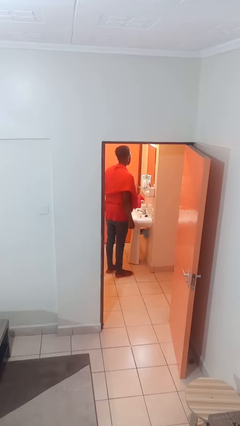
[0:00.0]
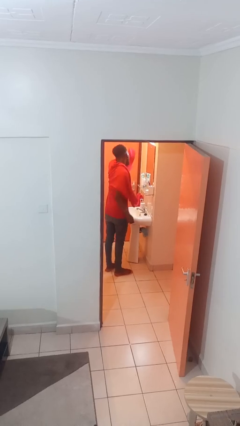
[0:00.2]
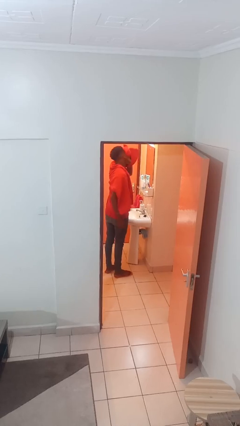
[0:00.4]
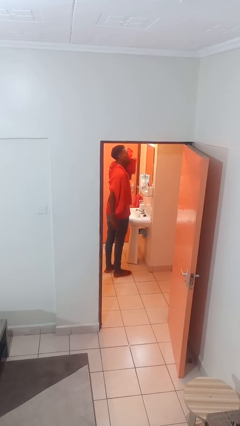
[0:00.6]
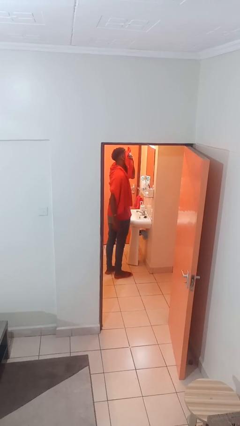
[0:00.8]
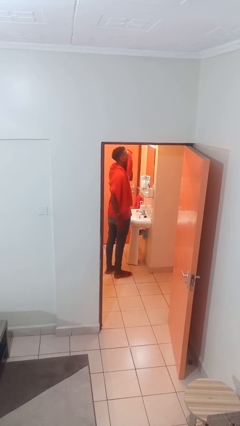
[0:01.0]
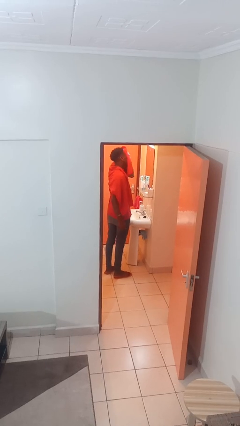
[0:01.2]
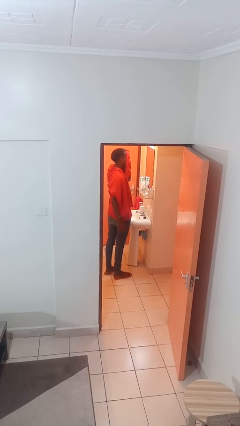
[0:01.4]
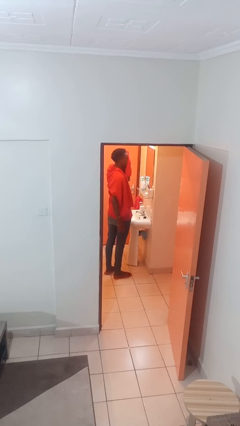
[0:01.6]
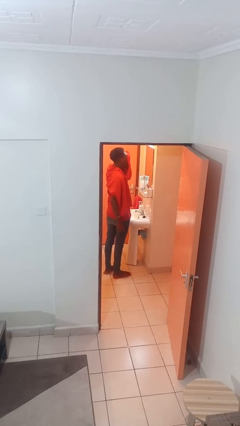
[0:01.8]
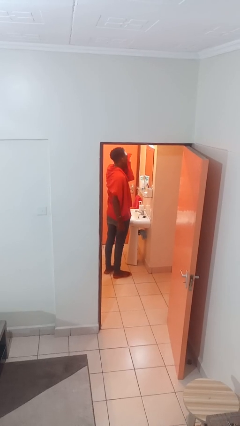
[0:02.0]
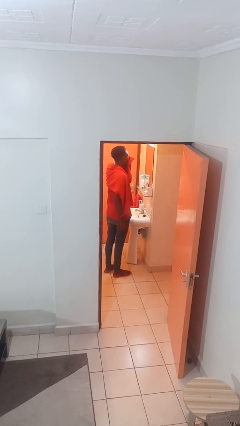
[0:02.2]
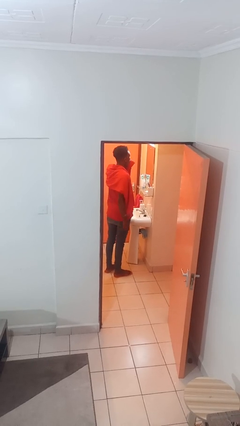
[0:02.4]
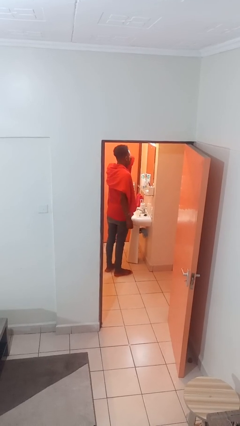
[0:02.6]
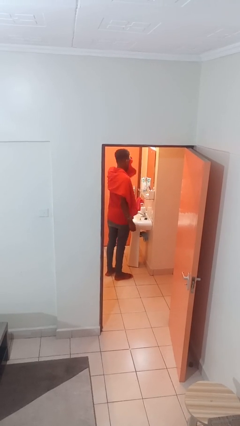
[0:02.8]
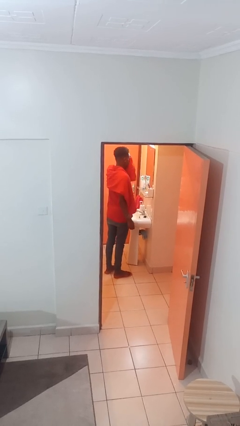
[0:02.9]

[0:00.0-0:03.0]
person dries face with towel

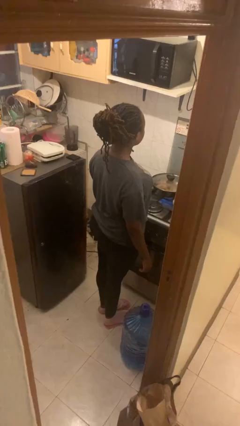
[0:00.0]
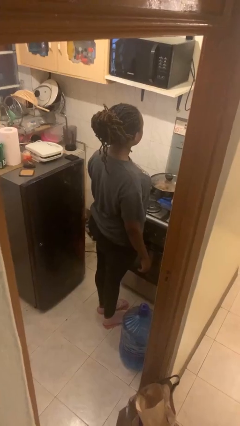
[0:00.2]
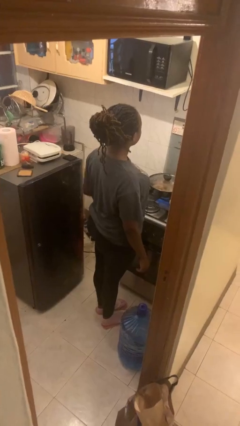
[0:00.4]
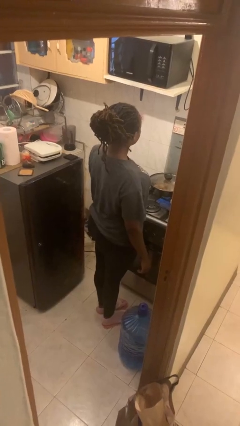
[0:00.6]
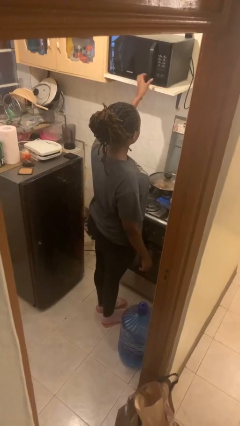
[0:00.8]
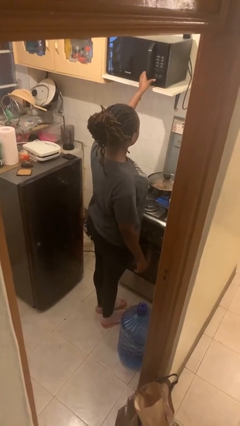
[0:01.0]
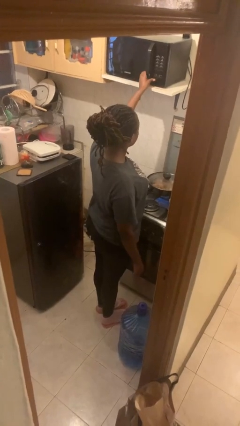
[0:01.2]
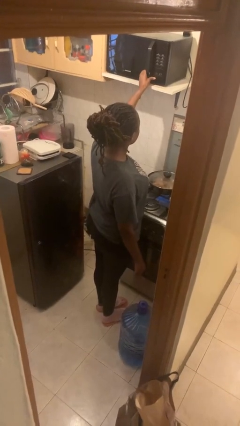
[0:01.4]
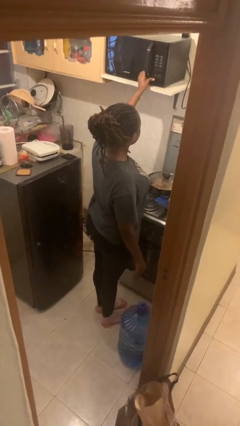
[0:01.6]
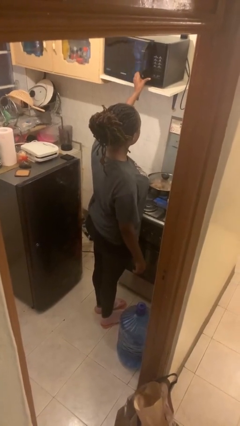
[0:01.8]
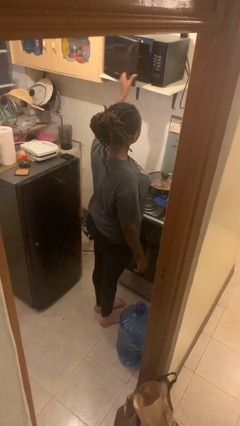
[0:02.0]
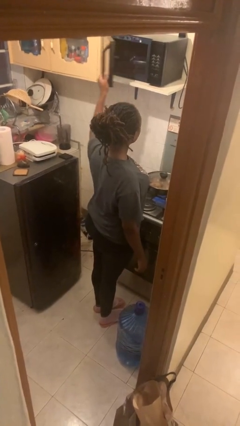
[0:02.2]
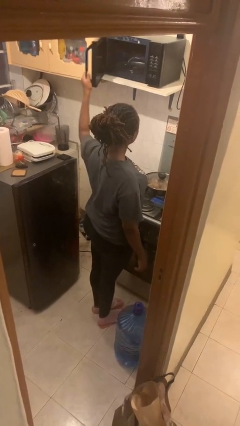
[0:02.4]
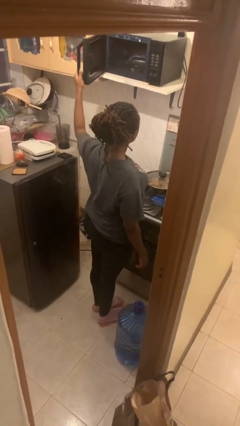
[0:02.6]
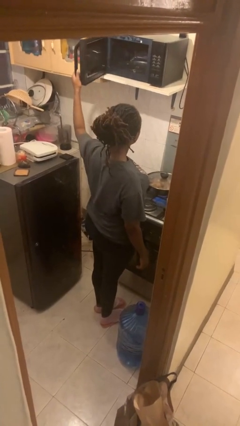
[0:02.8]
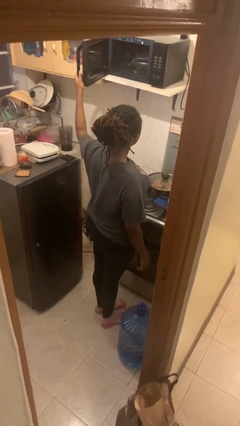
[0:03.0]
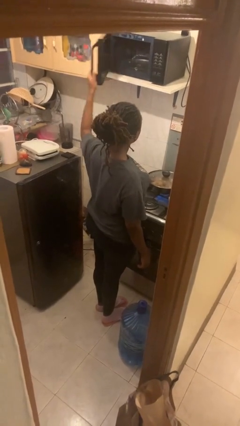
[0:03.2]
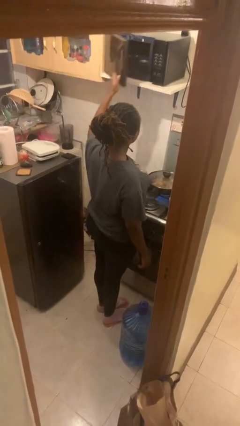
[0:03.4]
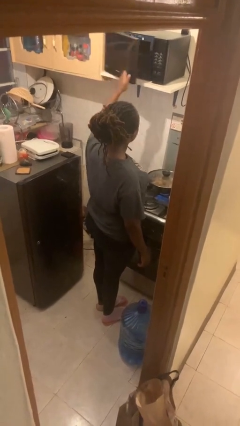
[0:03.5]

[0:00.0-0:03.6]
person opens microwave

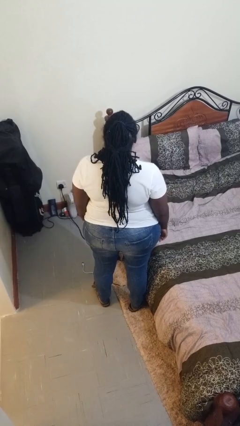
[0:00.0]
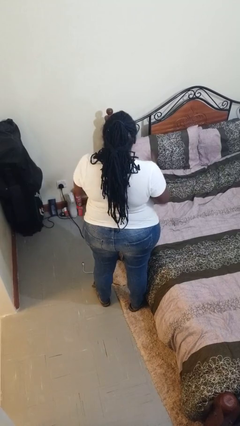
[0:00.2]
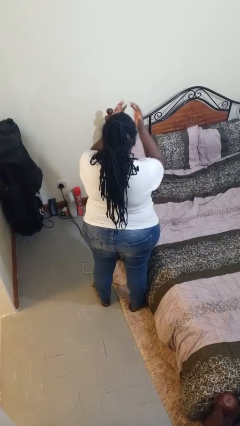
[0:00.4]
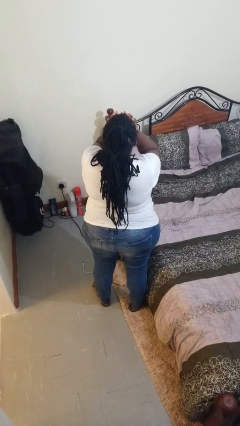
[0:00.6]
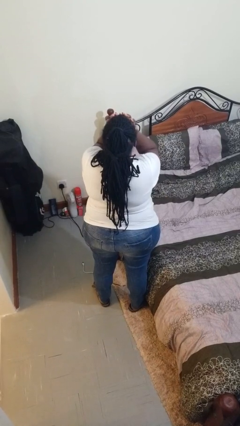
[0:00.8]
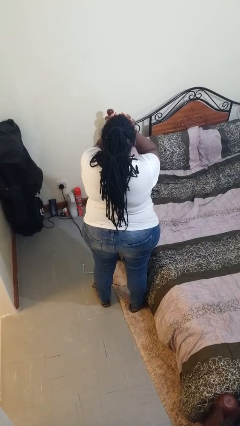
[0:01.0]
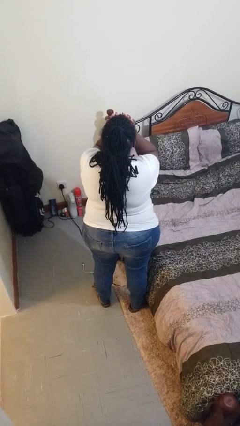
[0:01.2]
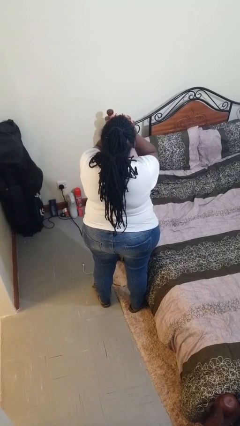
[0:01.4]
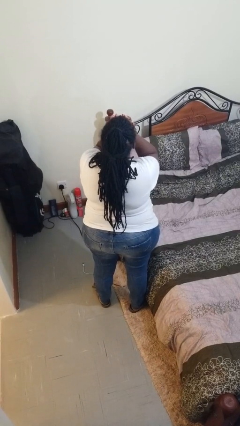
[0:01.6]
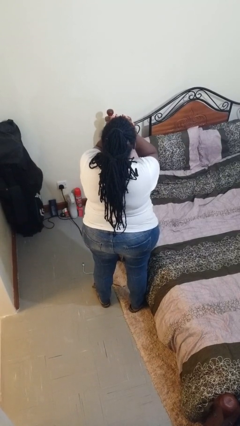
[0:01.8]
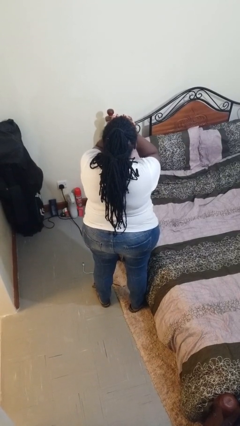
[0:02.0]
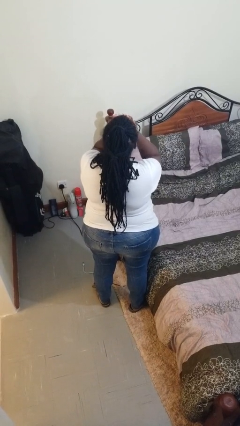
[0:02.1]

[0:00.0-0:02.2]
person covers face with hands

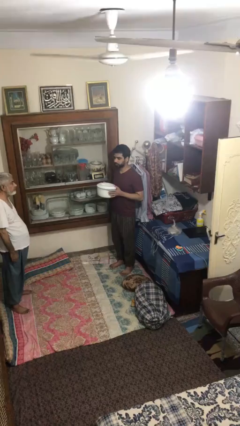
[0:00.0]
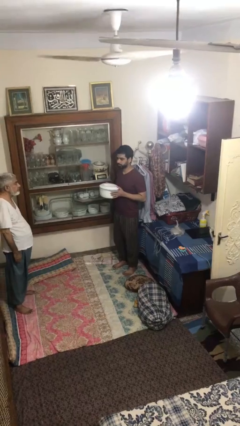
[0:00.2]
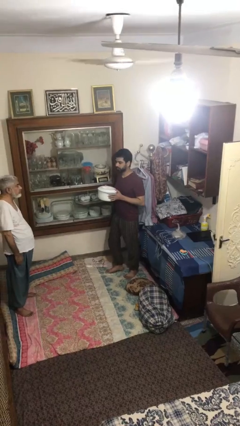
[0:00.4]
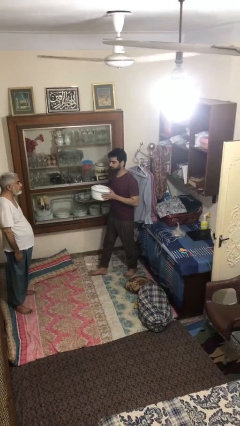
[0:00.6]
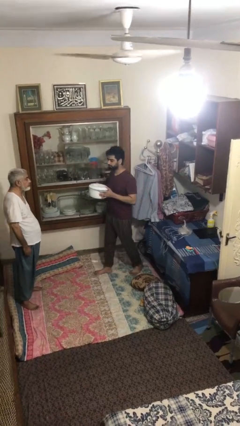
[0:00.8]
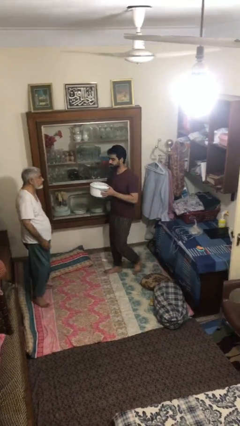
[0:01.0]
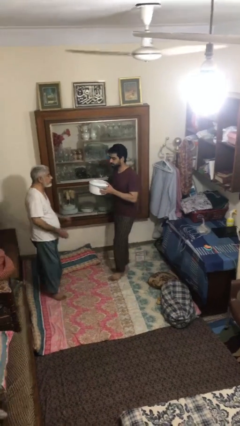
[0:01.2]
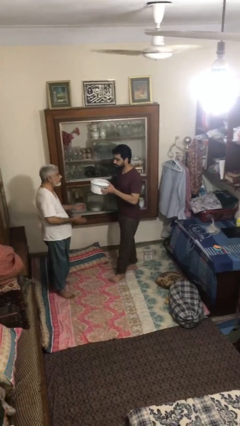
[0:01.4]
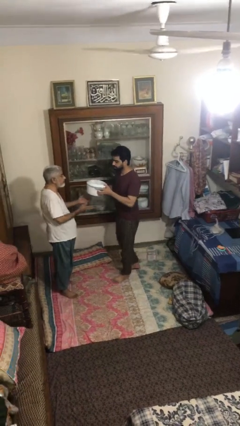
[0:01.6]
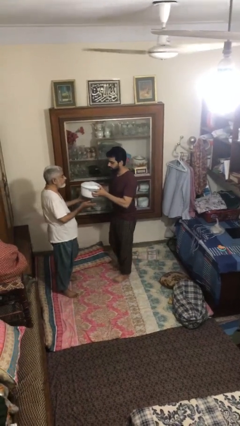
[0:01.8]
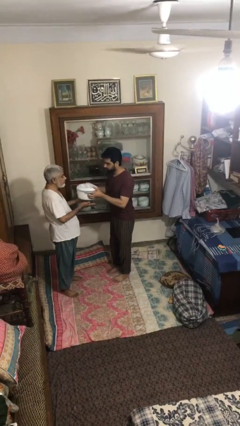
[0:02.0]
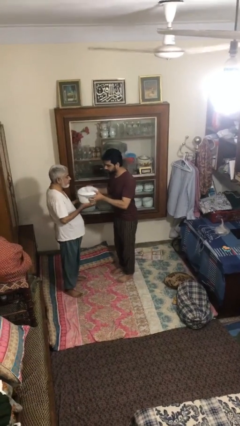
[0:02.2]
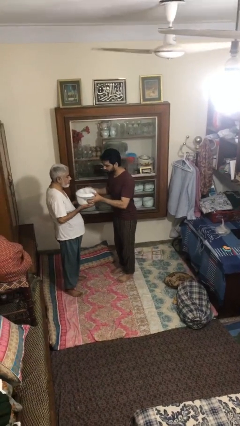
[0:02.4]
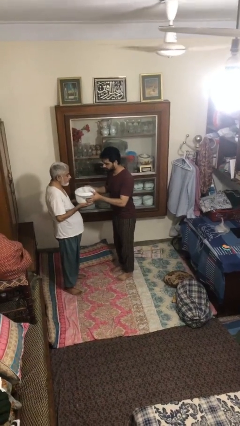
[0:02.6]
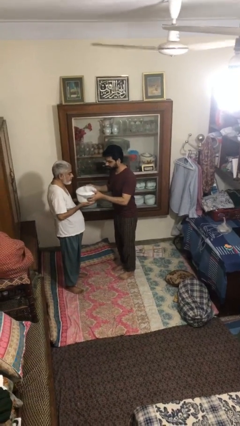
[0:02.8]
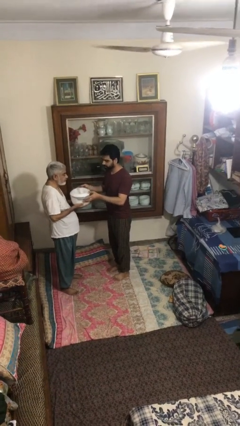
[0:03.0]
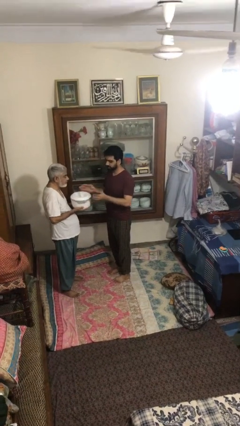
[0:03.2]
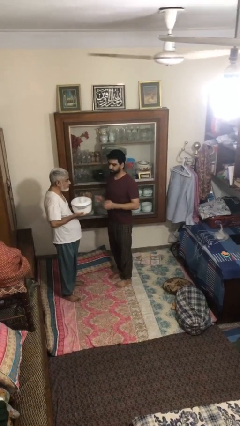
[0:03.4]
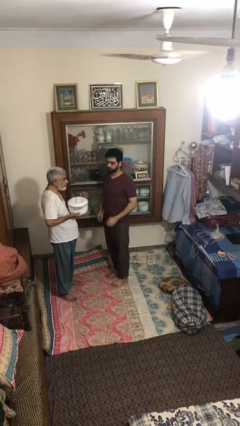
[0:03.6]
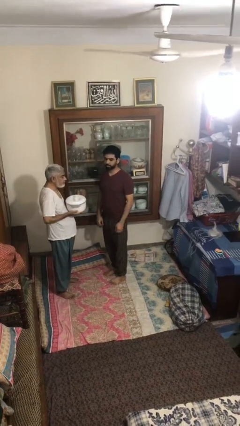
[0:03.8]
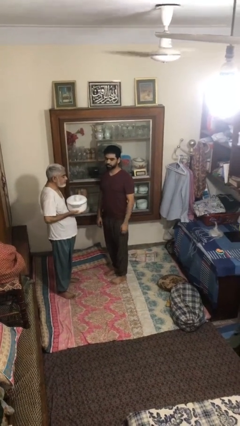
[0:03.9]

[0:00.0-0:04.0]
person transfers object to person

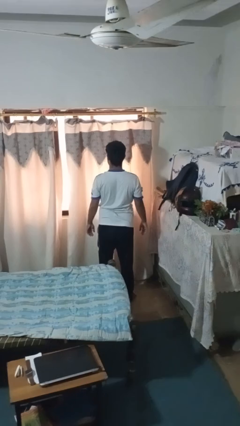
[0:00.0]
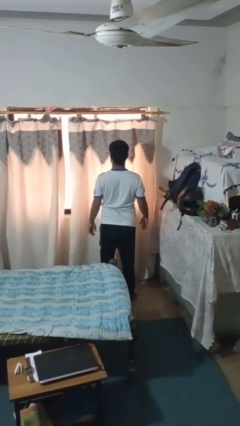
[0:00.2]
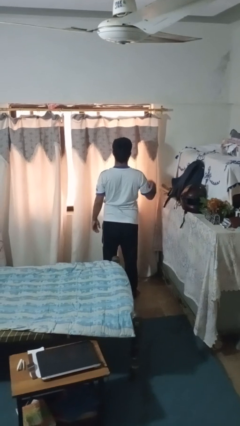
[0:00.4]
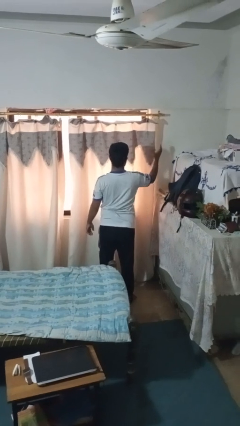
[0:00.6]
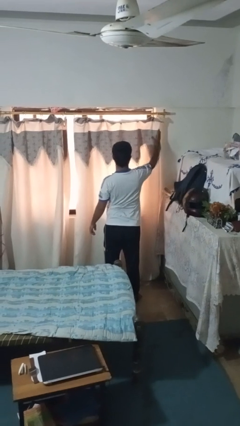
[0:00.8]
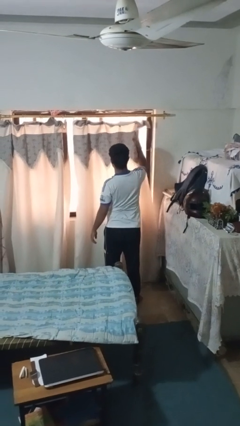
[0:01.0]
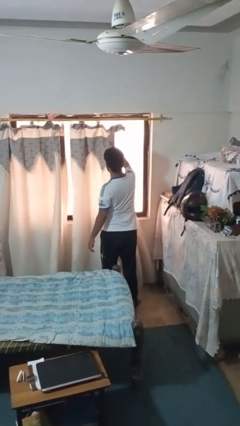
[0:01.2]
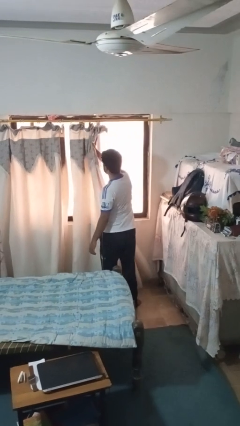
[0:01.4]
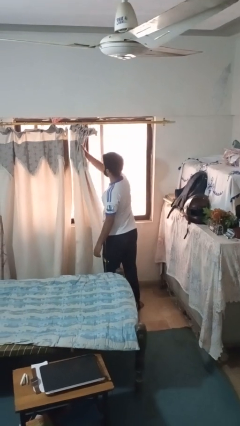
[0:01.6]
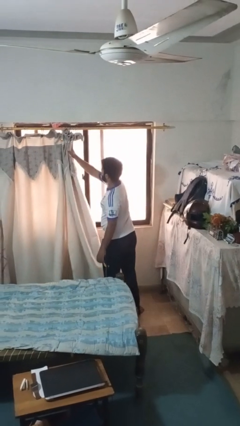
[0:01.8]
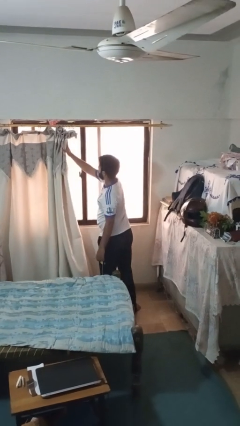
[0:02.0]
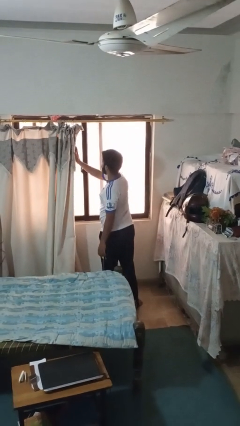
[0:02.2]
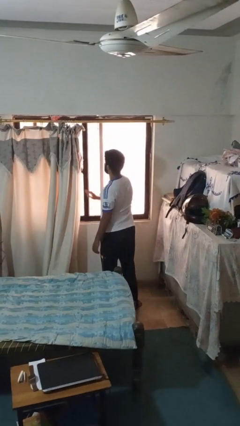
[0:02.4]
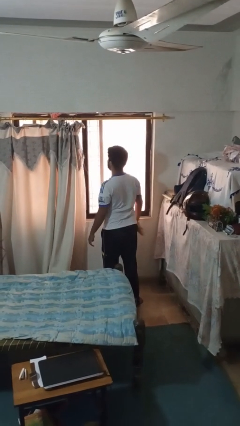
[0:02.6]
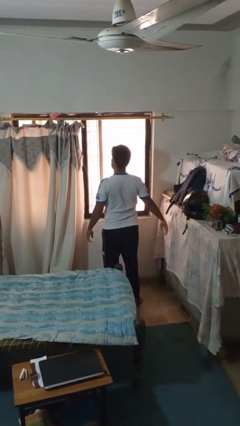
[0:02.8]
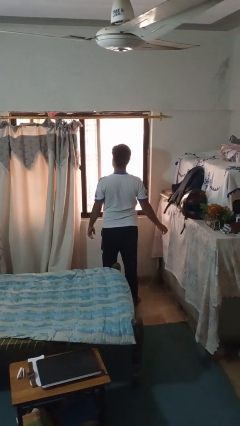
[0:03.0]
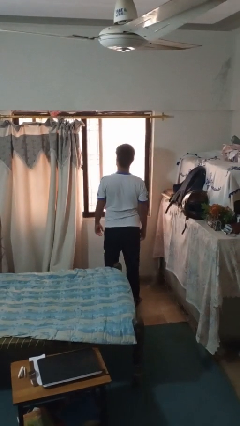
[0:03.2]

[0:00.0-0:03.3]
person opens curtains

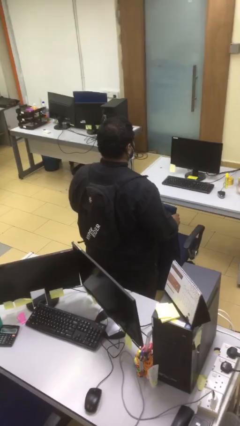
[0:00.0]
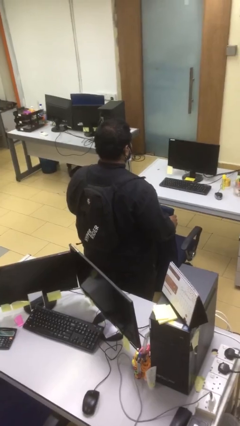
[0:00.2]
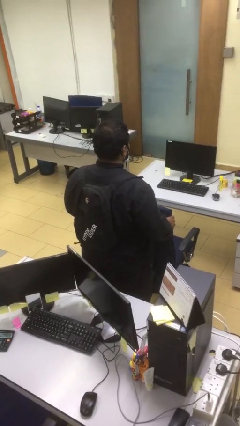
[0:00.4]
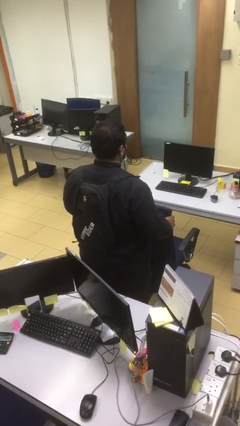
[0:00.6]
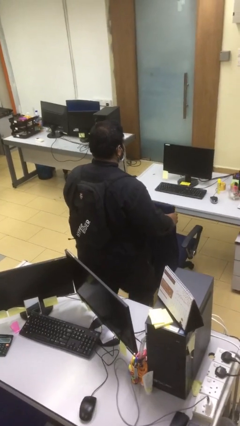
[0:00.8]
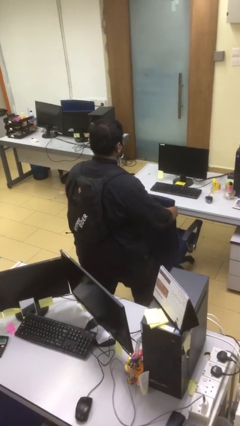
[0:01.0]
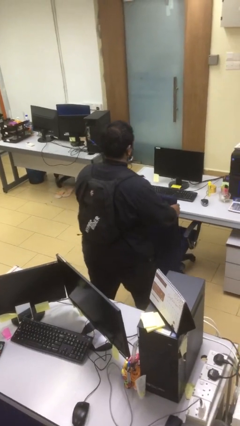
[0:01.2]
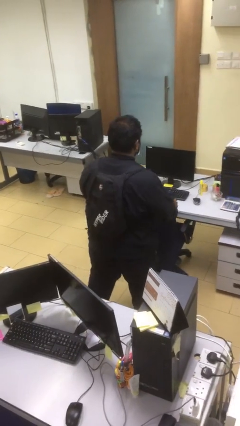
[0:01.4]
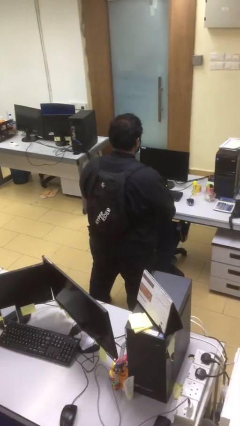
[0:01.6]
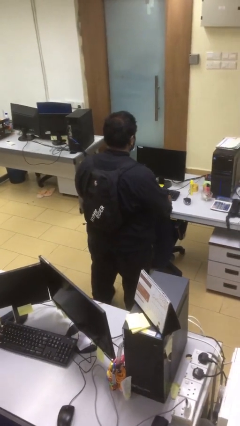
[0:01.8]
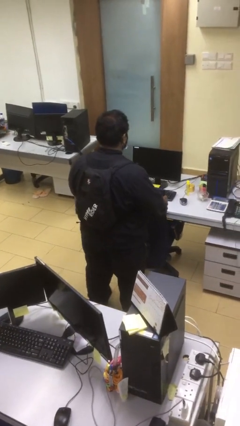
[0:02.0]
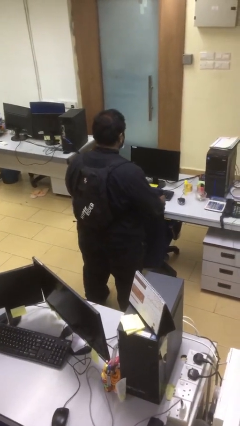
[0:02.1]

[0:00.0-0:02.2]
person pushes in chair
